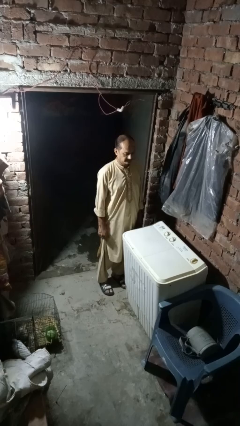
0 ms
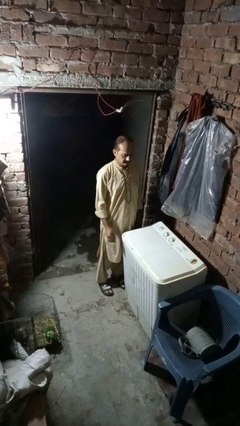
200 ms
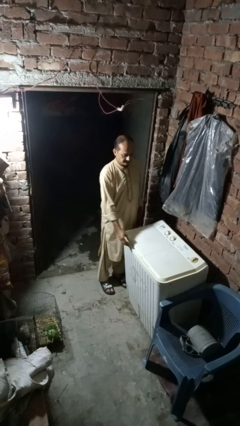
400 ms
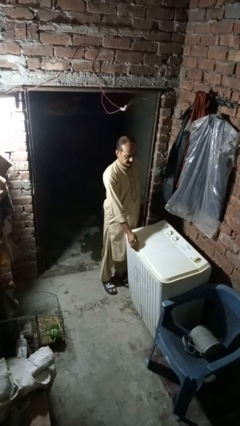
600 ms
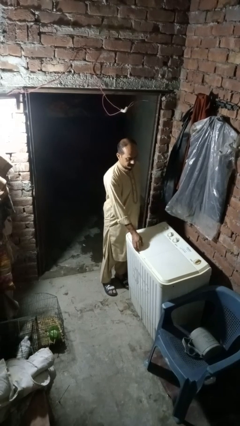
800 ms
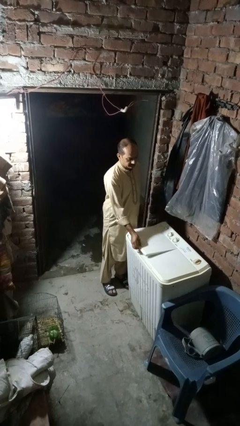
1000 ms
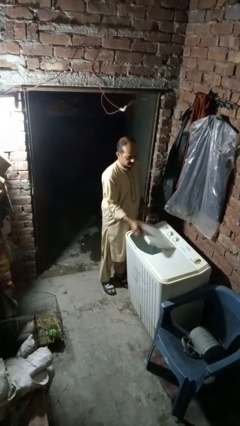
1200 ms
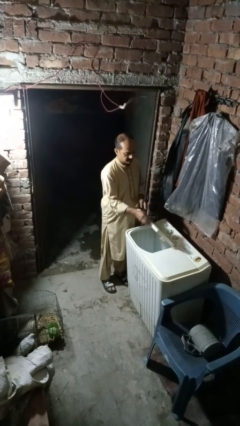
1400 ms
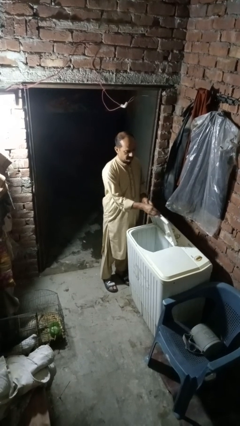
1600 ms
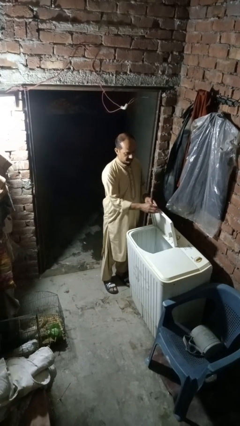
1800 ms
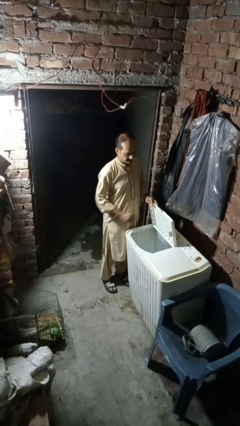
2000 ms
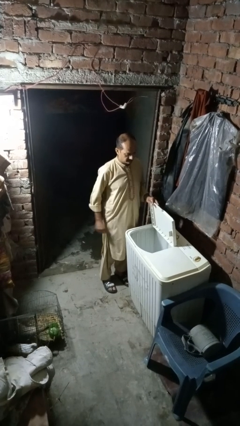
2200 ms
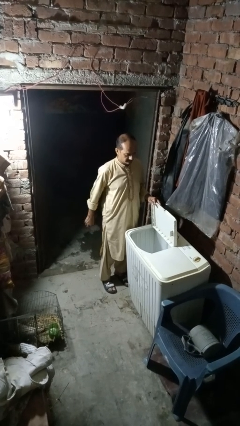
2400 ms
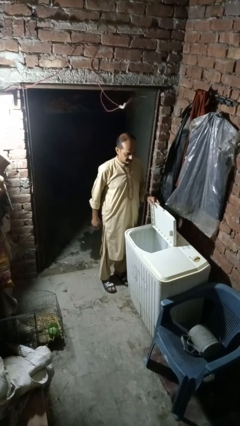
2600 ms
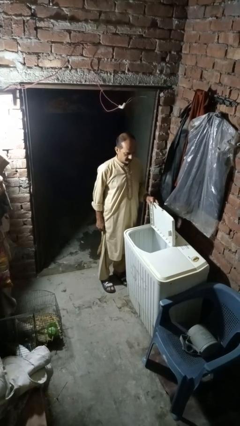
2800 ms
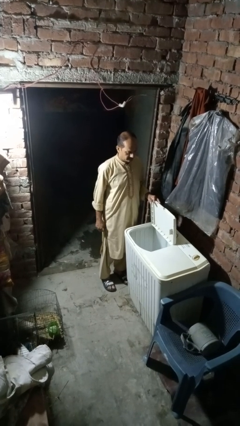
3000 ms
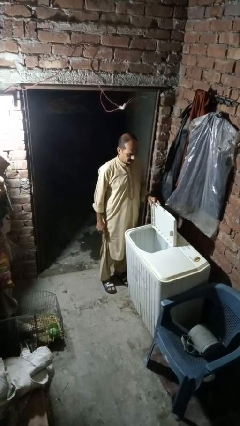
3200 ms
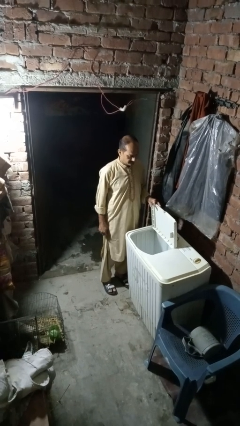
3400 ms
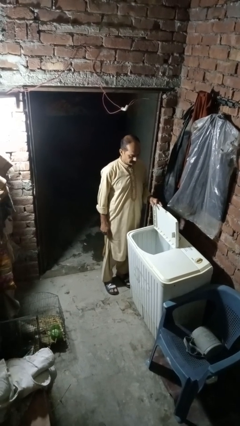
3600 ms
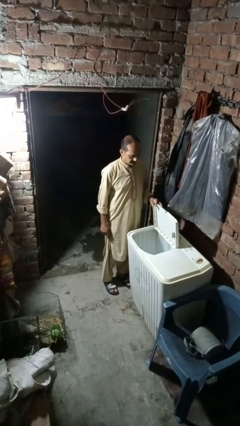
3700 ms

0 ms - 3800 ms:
person opens clothes washer

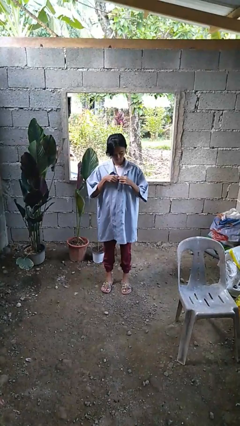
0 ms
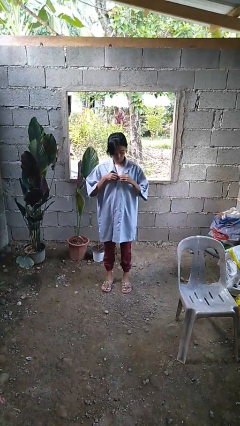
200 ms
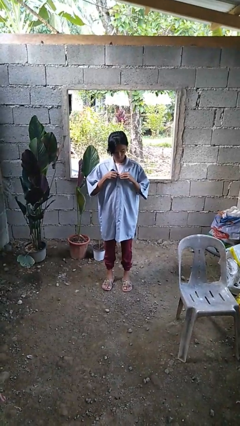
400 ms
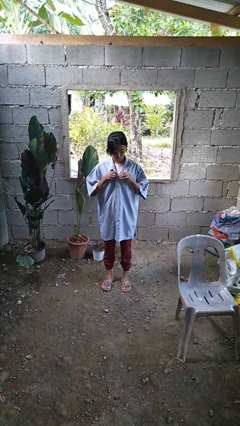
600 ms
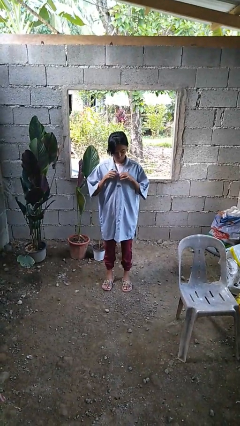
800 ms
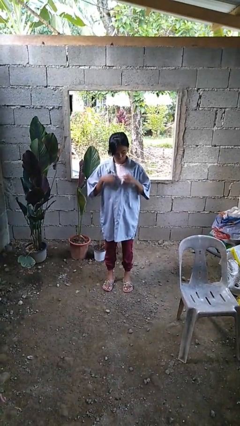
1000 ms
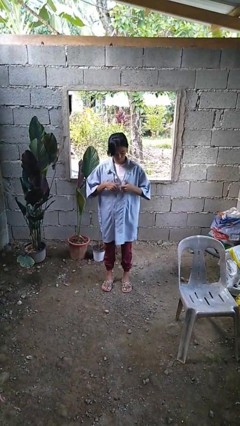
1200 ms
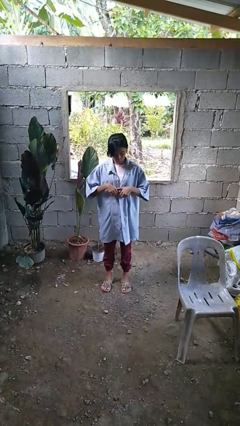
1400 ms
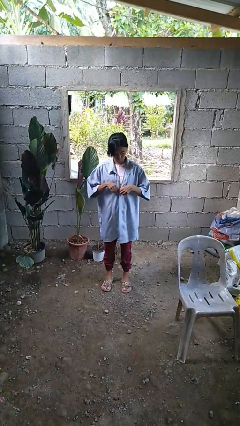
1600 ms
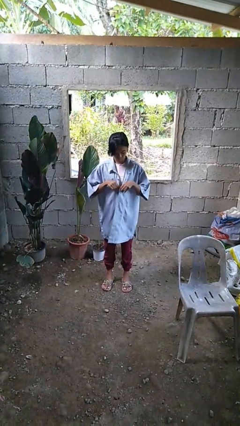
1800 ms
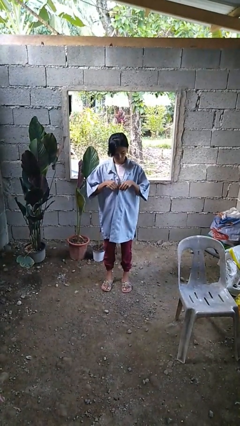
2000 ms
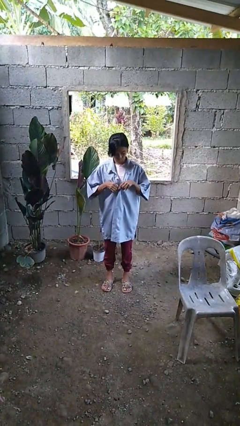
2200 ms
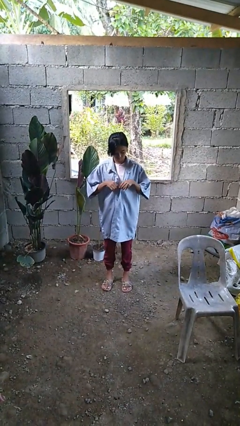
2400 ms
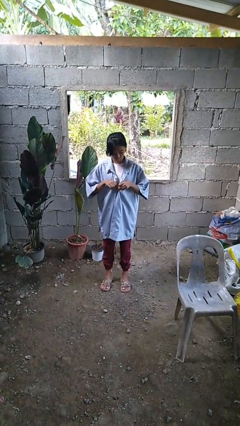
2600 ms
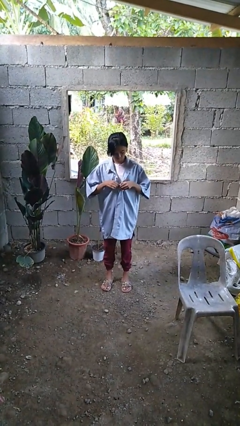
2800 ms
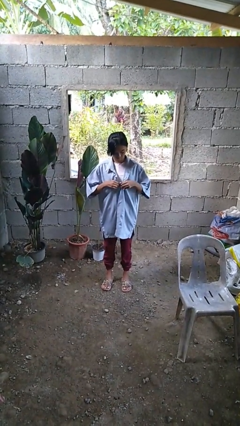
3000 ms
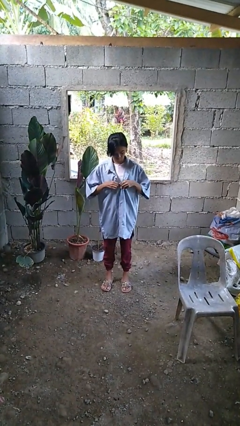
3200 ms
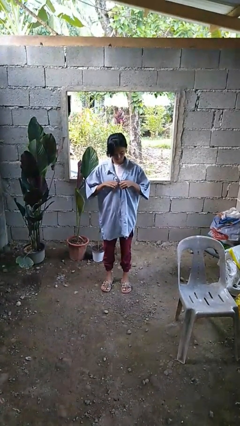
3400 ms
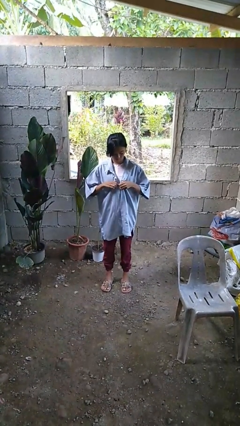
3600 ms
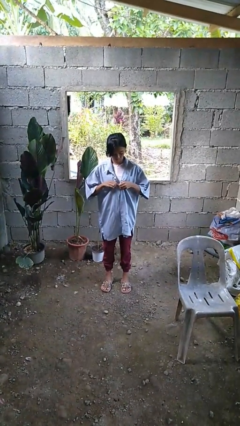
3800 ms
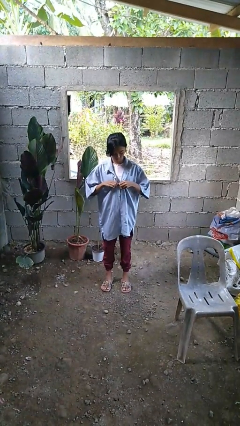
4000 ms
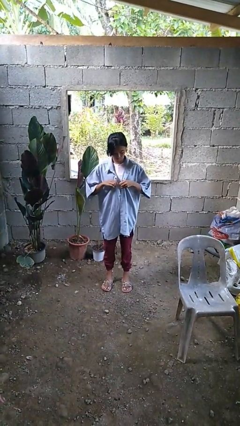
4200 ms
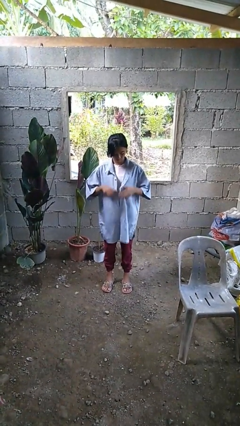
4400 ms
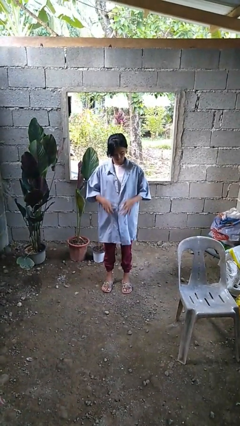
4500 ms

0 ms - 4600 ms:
person unbuttons shirt

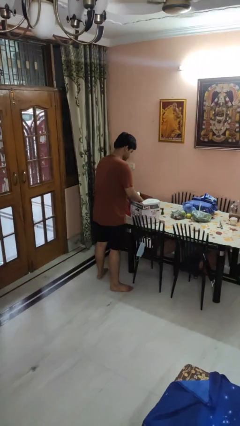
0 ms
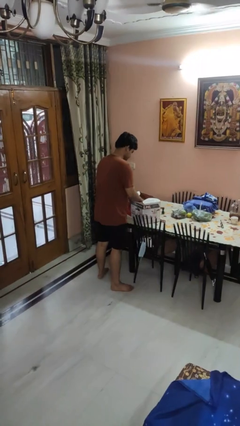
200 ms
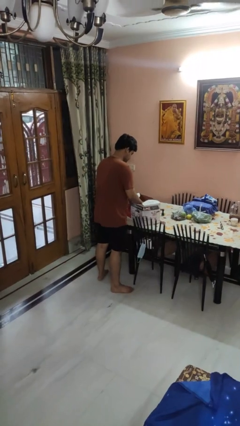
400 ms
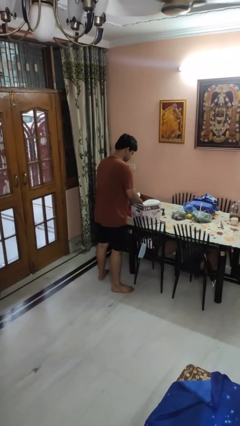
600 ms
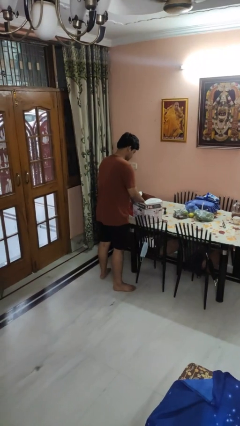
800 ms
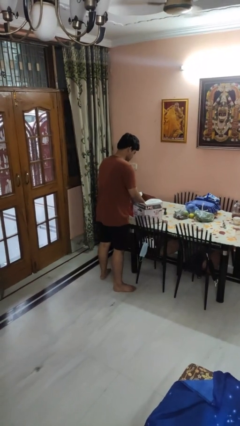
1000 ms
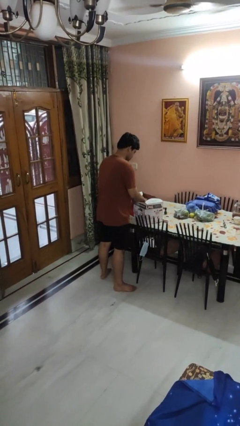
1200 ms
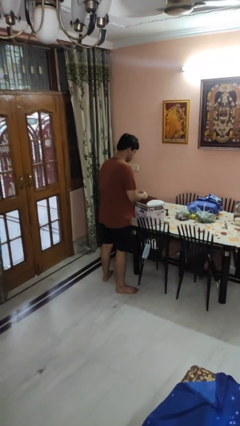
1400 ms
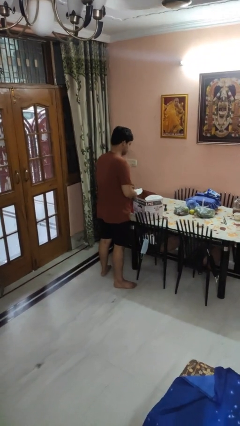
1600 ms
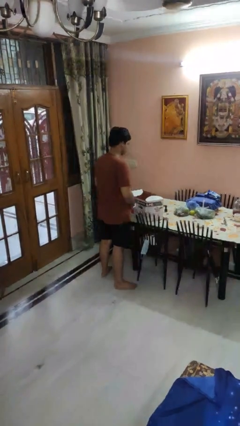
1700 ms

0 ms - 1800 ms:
person searches in box

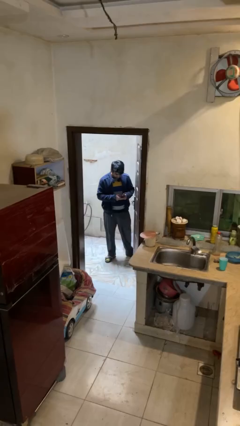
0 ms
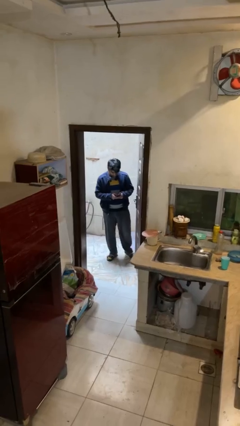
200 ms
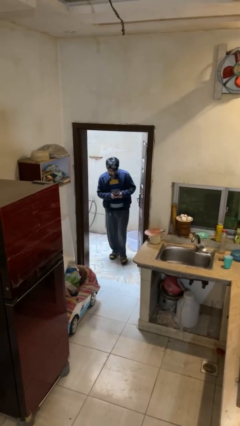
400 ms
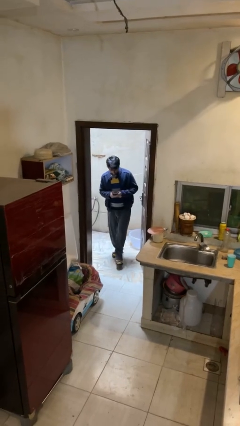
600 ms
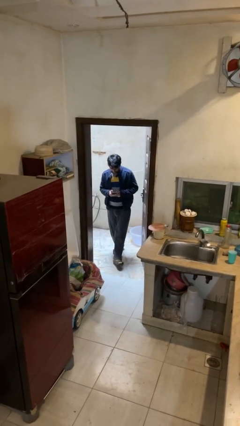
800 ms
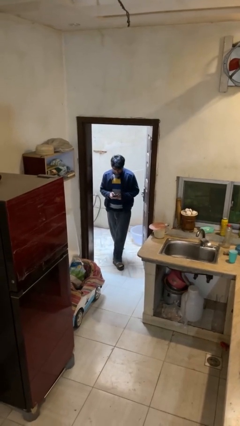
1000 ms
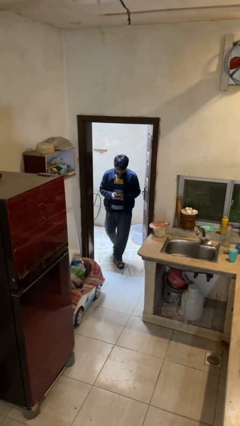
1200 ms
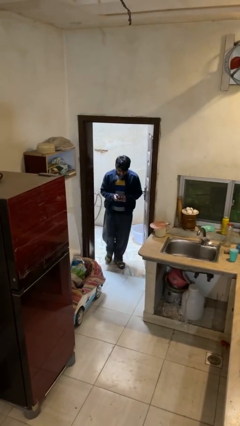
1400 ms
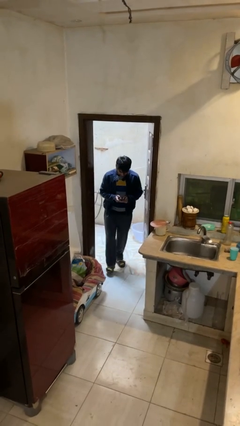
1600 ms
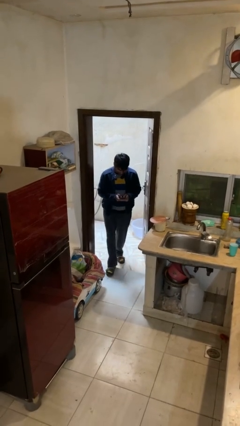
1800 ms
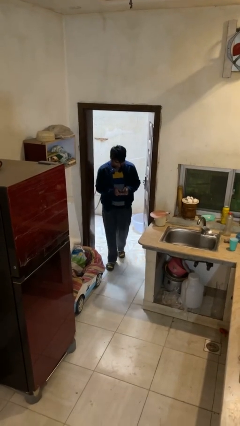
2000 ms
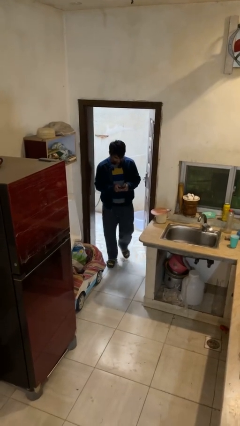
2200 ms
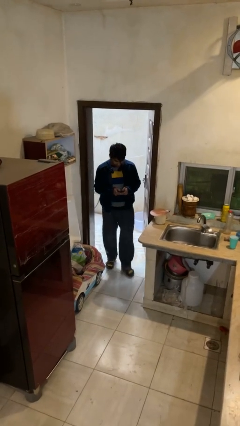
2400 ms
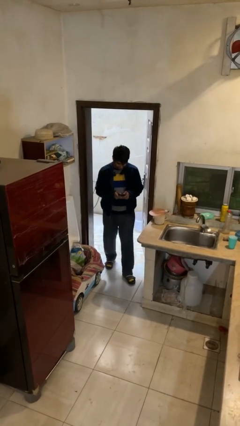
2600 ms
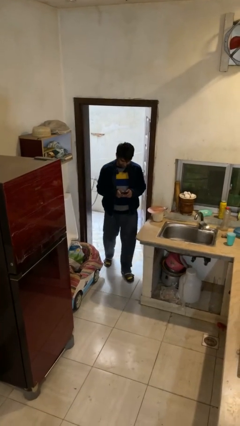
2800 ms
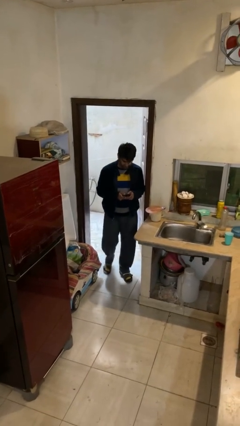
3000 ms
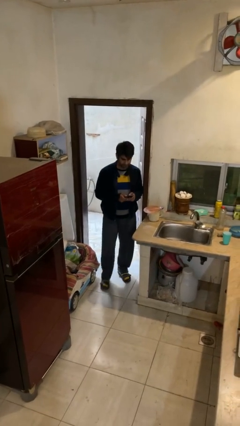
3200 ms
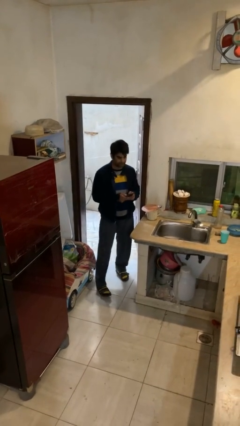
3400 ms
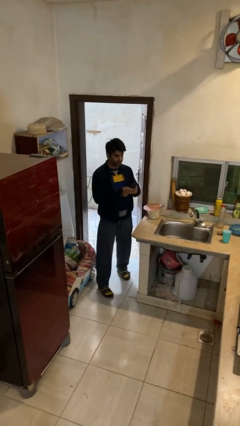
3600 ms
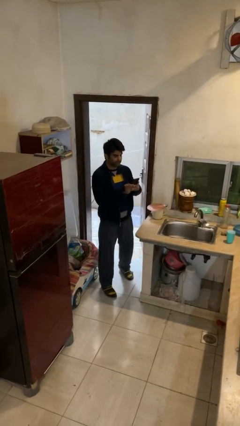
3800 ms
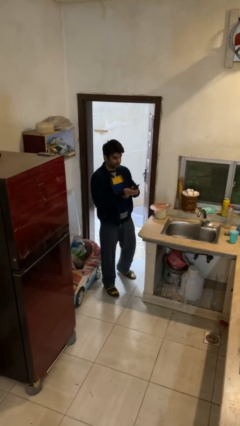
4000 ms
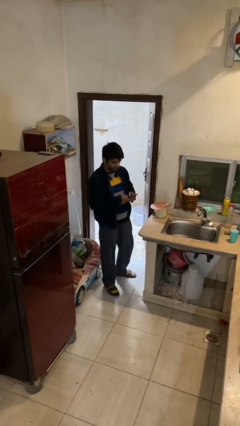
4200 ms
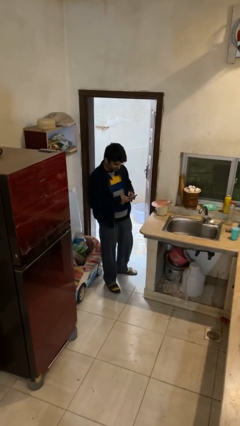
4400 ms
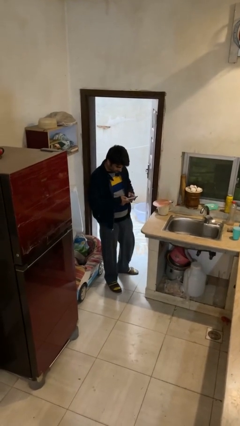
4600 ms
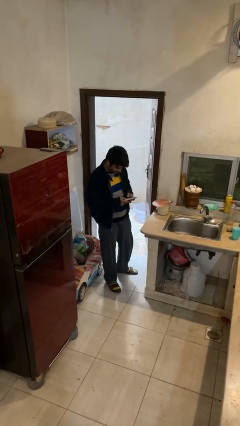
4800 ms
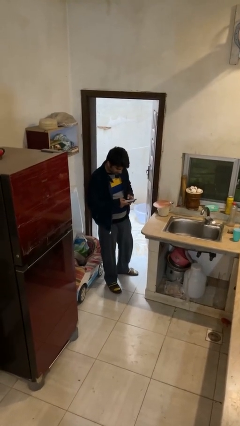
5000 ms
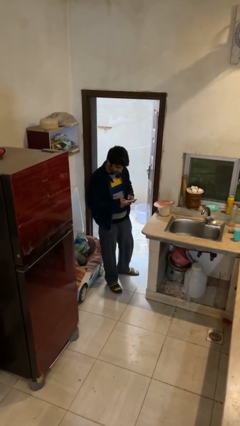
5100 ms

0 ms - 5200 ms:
person enters scene through structure

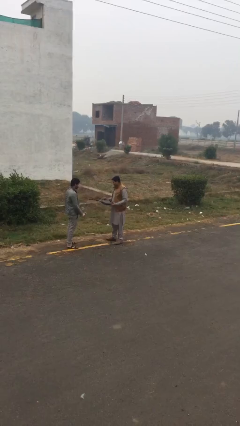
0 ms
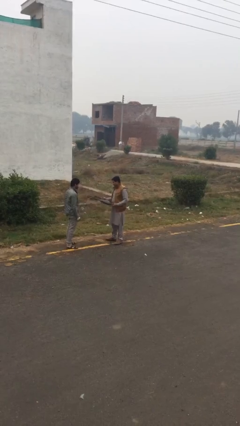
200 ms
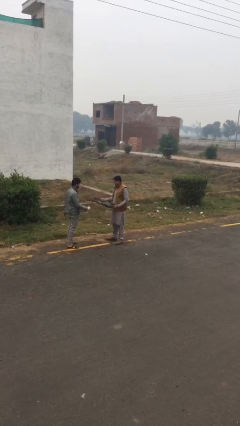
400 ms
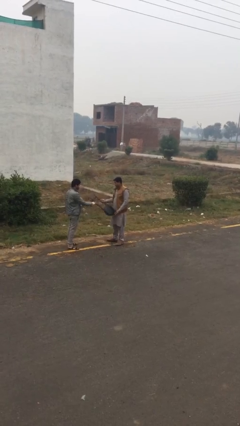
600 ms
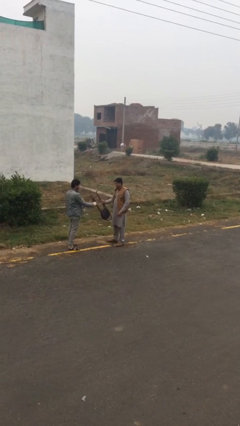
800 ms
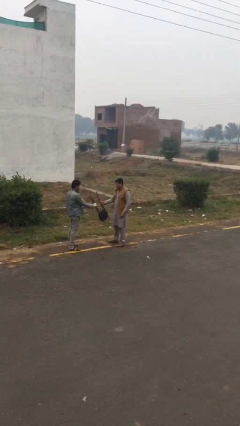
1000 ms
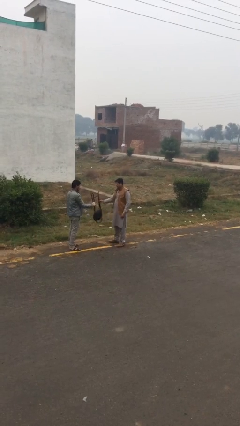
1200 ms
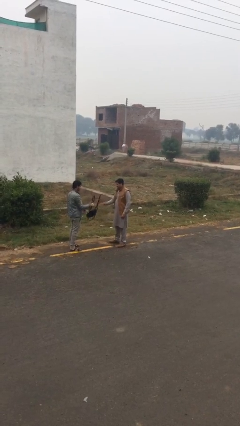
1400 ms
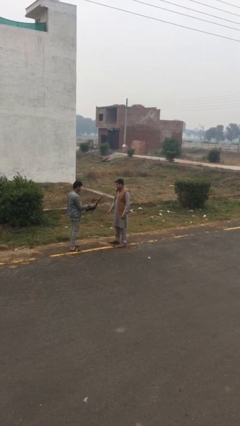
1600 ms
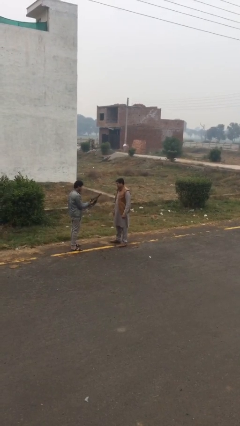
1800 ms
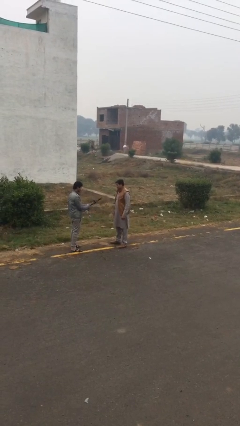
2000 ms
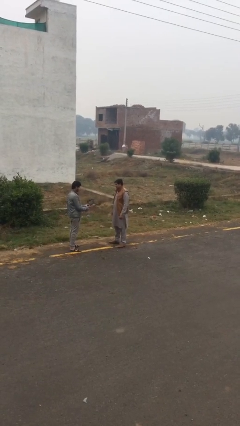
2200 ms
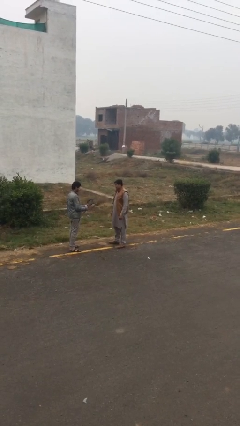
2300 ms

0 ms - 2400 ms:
person transfers object to person
